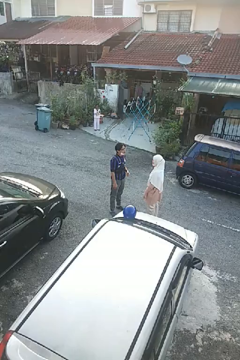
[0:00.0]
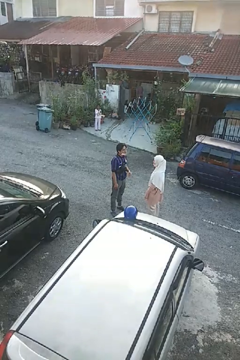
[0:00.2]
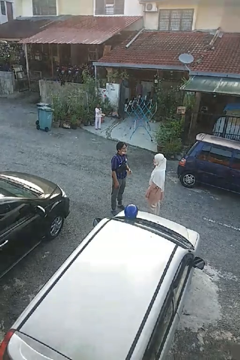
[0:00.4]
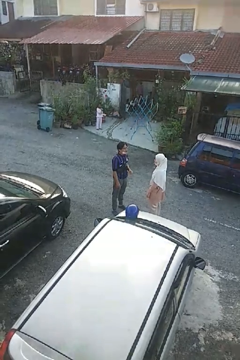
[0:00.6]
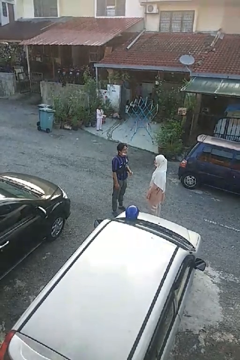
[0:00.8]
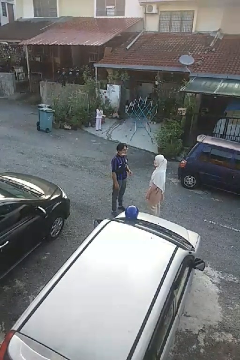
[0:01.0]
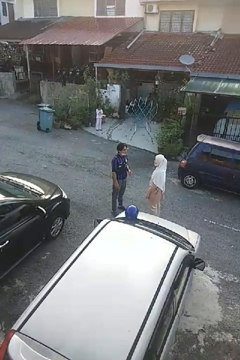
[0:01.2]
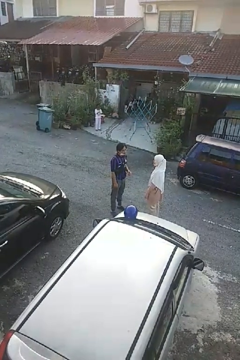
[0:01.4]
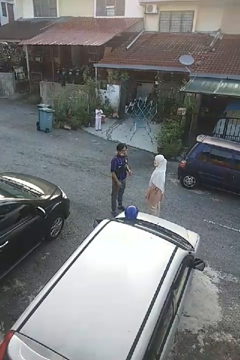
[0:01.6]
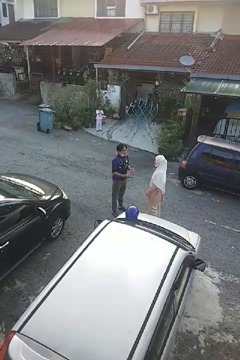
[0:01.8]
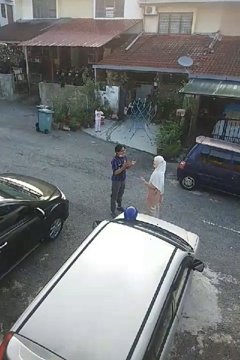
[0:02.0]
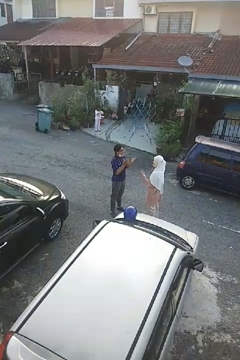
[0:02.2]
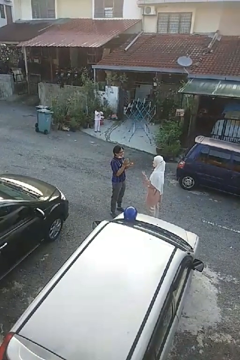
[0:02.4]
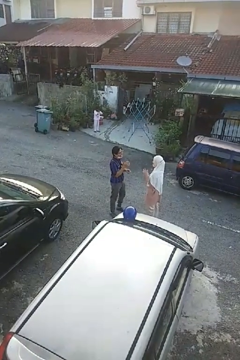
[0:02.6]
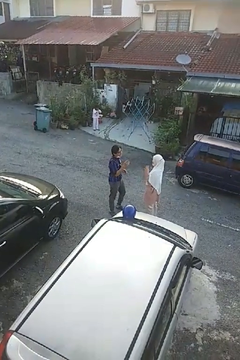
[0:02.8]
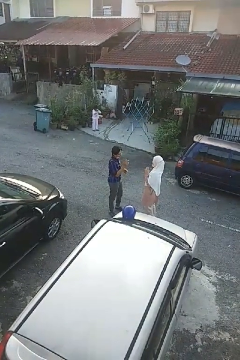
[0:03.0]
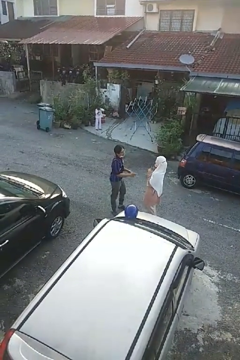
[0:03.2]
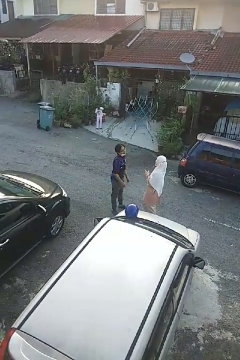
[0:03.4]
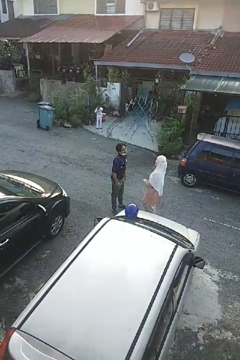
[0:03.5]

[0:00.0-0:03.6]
person laughs with person

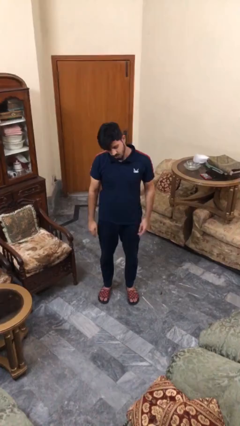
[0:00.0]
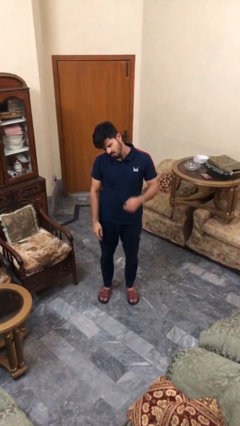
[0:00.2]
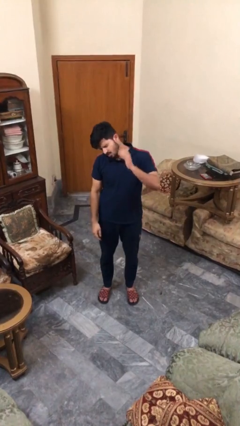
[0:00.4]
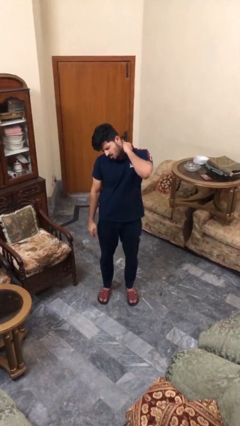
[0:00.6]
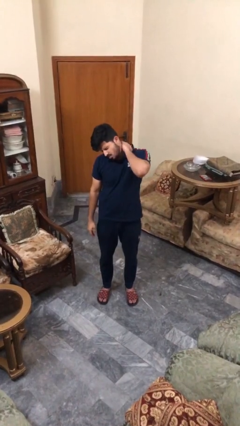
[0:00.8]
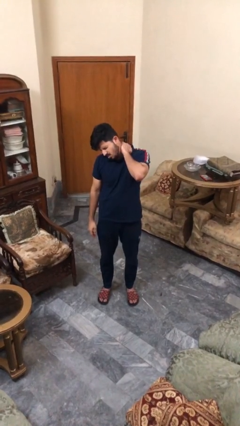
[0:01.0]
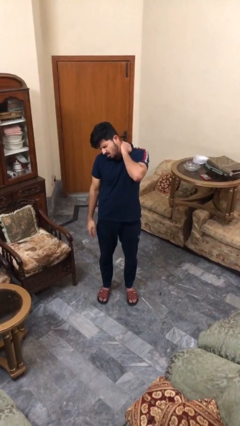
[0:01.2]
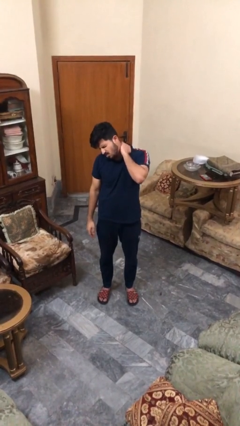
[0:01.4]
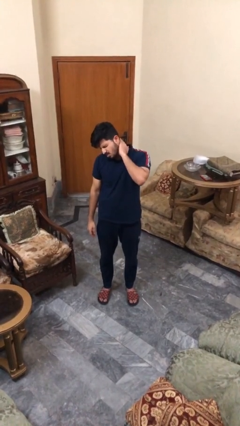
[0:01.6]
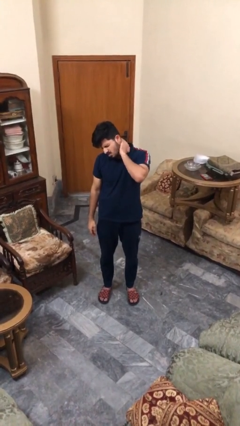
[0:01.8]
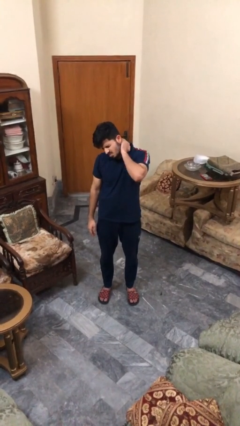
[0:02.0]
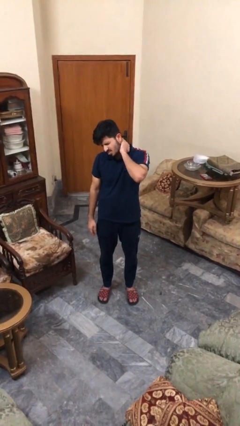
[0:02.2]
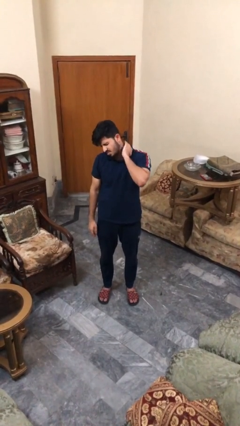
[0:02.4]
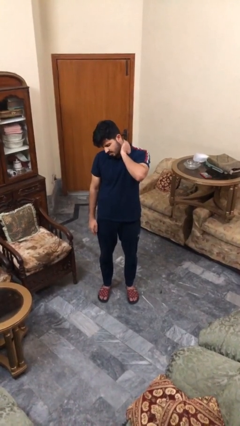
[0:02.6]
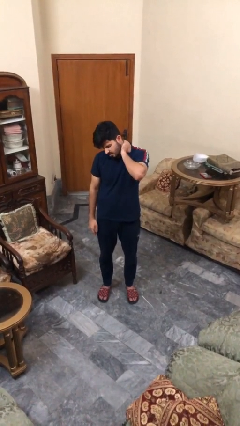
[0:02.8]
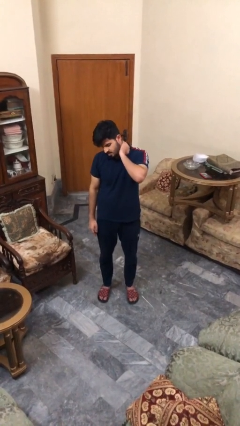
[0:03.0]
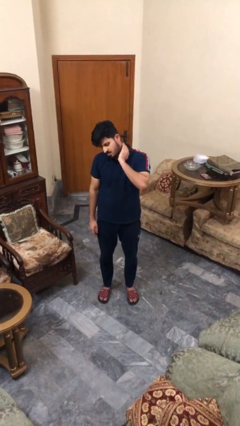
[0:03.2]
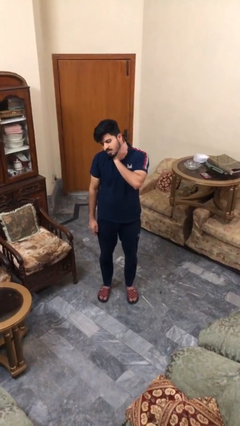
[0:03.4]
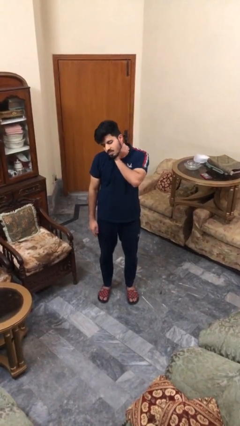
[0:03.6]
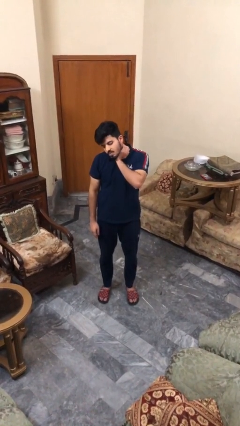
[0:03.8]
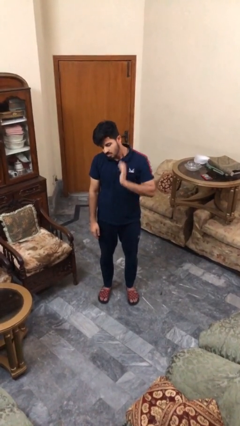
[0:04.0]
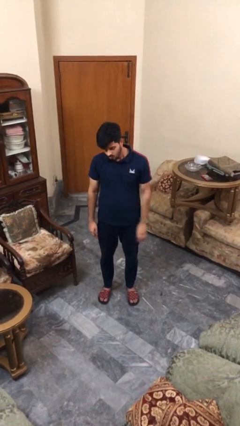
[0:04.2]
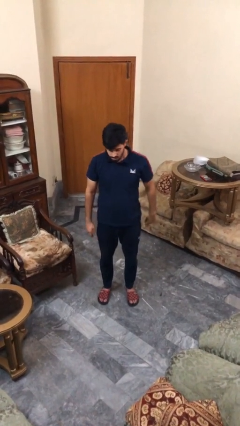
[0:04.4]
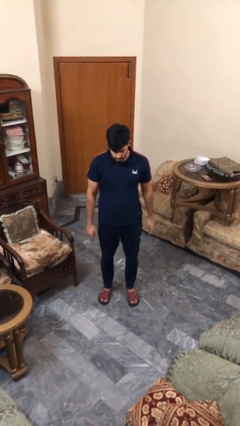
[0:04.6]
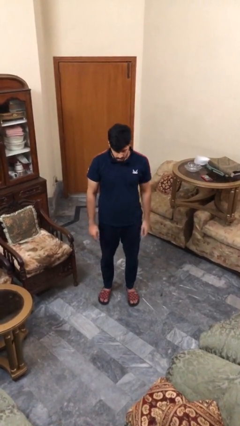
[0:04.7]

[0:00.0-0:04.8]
person rubs neck

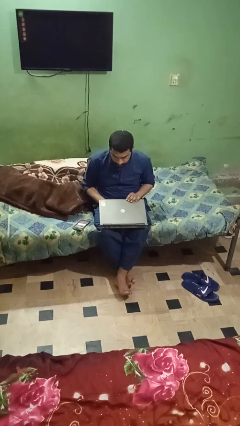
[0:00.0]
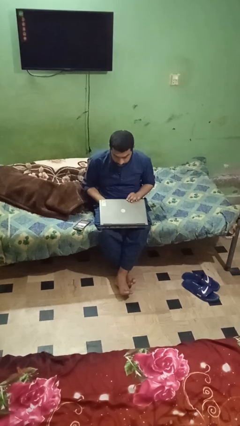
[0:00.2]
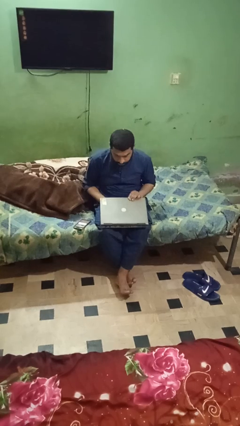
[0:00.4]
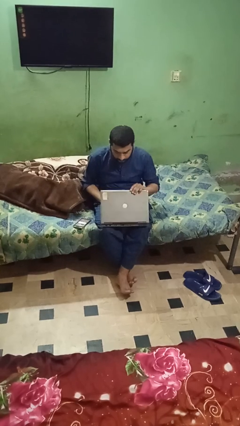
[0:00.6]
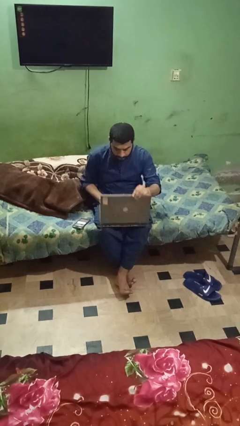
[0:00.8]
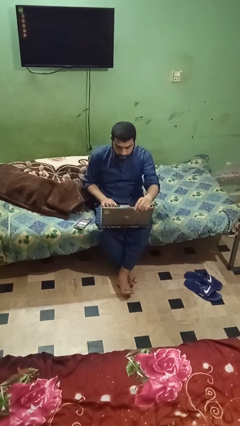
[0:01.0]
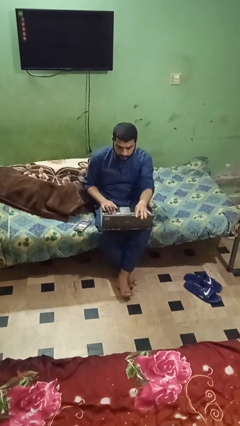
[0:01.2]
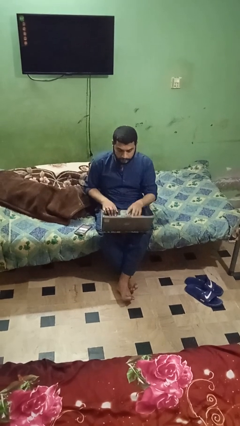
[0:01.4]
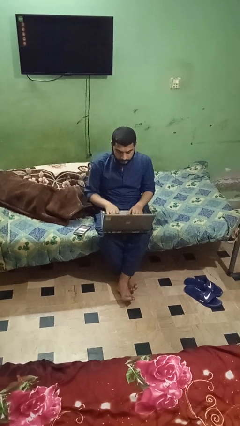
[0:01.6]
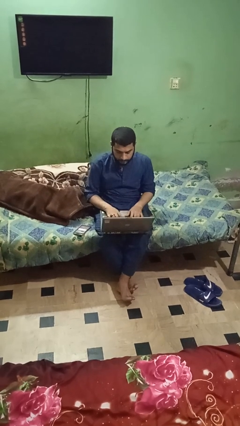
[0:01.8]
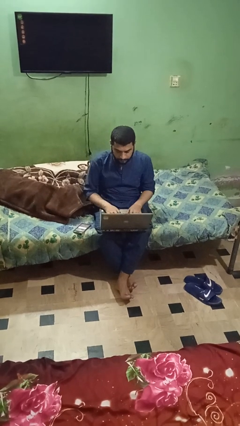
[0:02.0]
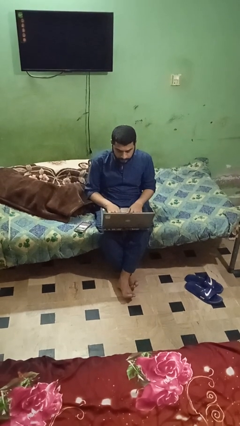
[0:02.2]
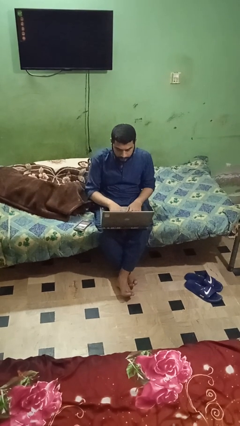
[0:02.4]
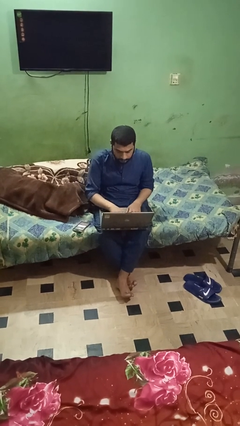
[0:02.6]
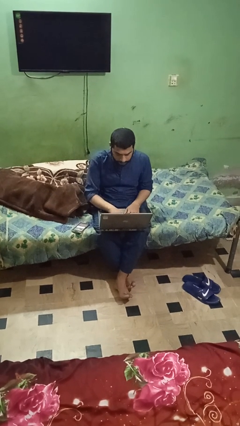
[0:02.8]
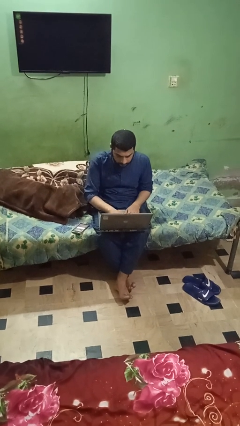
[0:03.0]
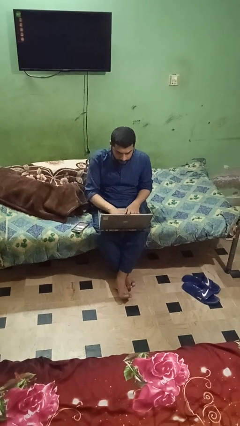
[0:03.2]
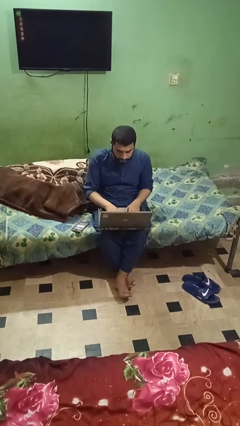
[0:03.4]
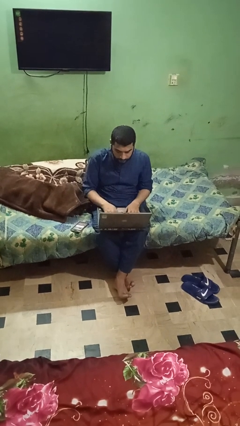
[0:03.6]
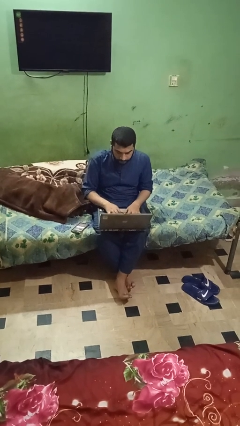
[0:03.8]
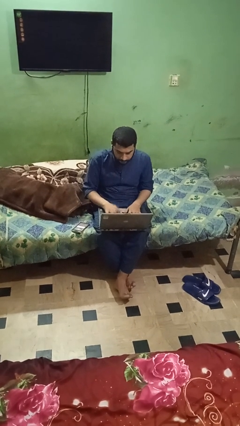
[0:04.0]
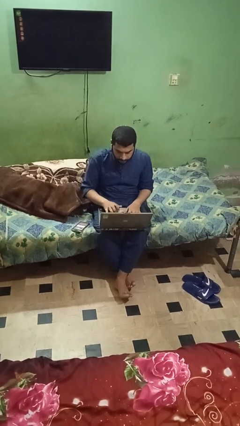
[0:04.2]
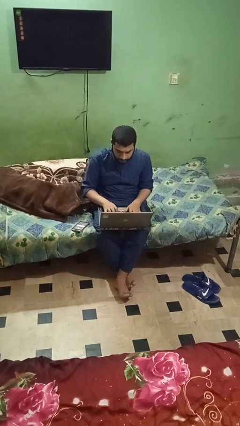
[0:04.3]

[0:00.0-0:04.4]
person opens laptop

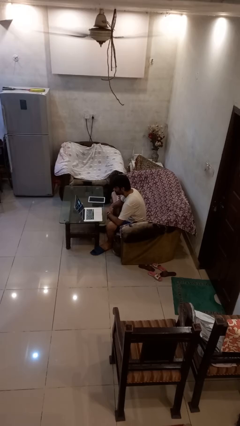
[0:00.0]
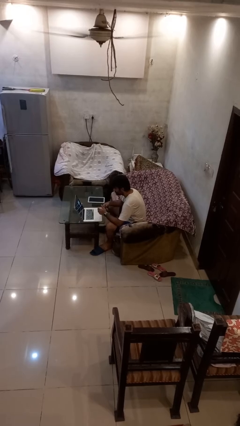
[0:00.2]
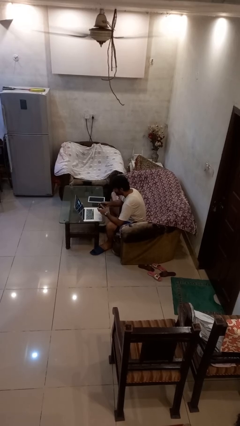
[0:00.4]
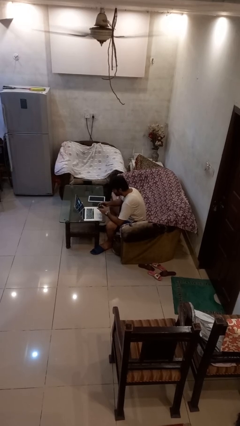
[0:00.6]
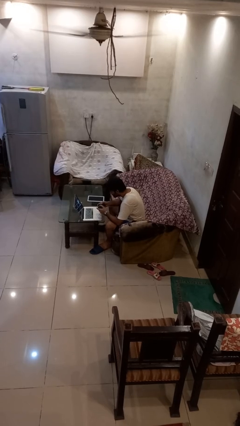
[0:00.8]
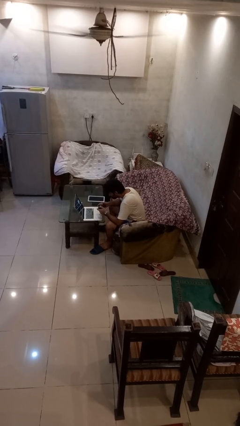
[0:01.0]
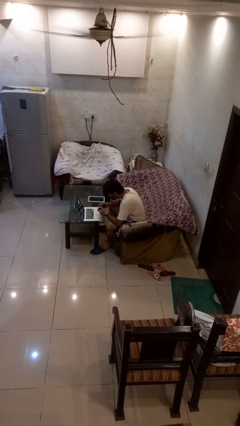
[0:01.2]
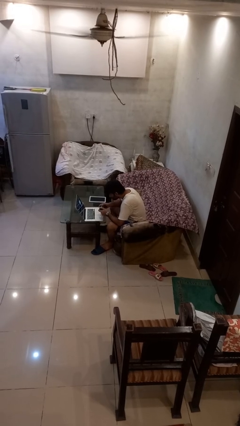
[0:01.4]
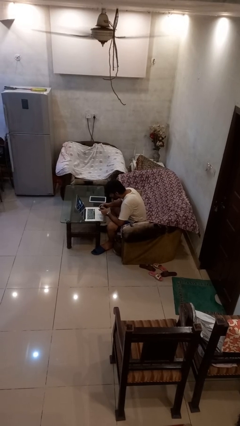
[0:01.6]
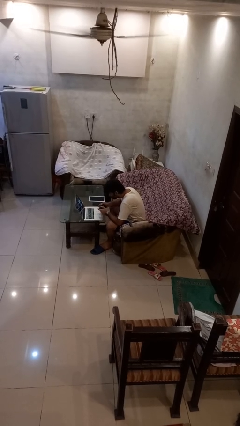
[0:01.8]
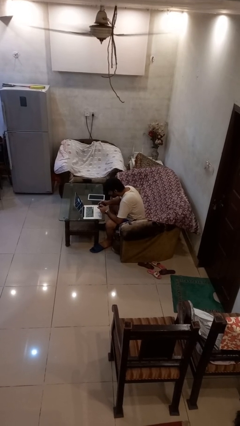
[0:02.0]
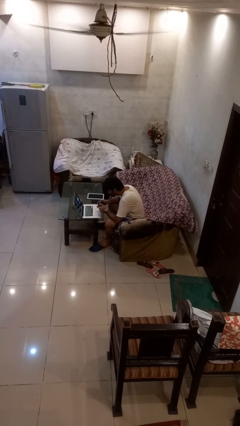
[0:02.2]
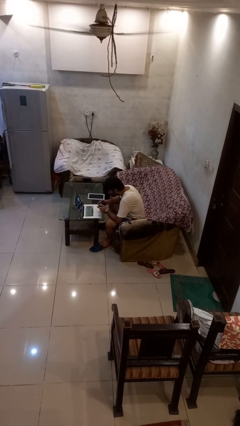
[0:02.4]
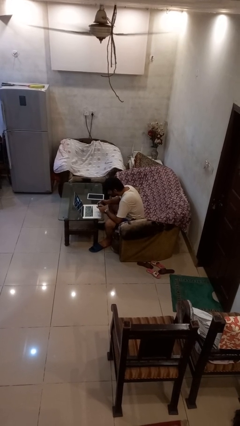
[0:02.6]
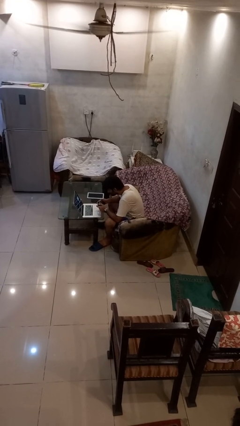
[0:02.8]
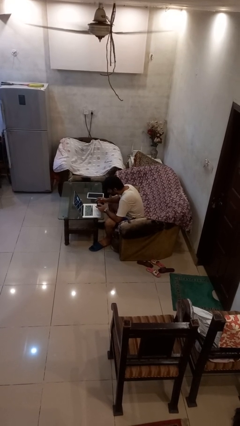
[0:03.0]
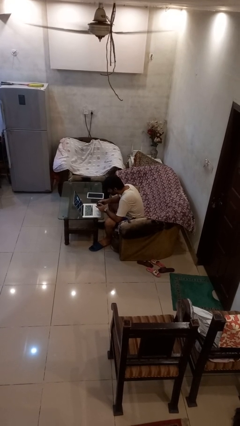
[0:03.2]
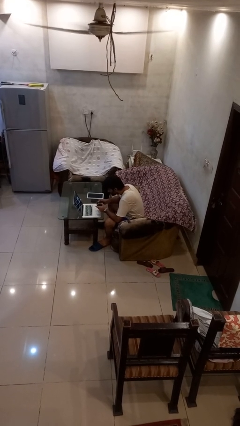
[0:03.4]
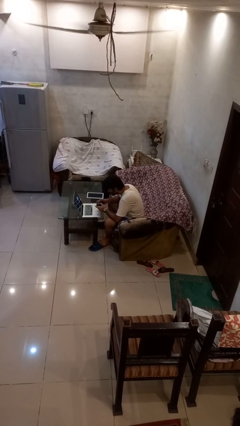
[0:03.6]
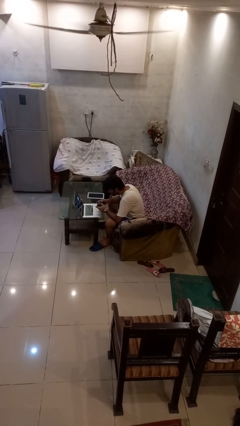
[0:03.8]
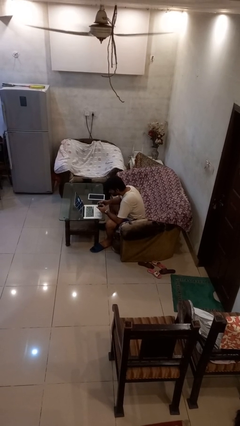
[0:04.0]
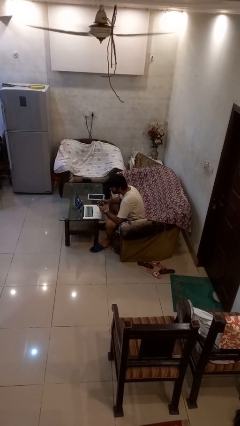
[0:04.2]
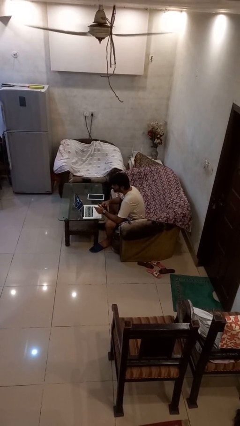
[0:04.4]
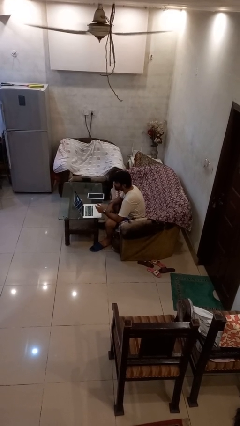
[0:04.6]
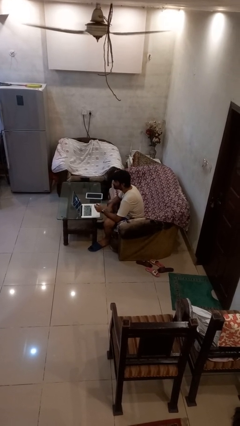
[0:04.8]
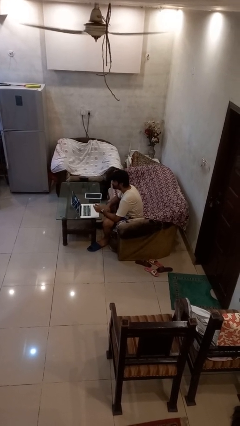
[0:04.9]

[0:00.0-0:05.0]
person interacts with handheld game

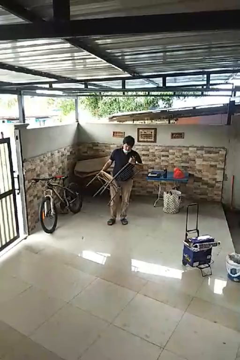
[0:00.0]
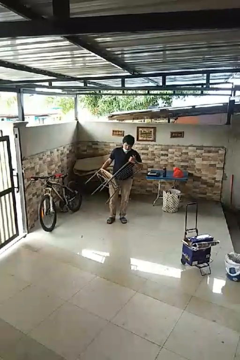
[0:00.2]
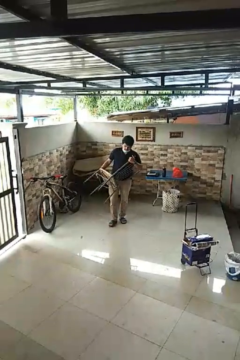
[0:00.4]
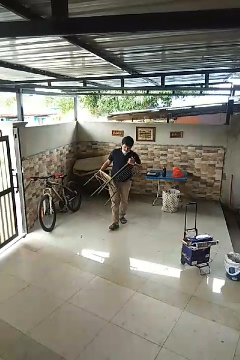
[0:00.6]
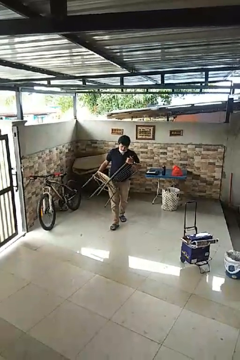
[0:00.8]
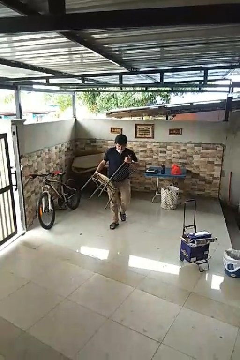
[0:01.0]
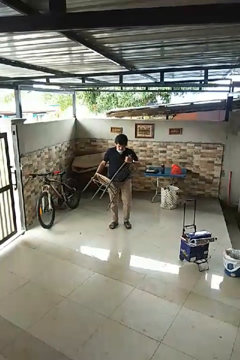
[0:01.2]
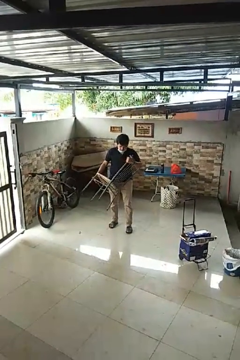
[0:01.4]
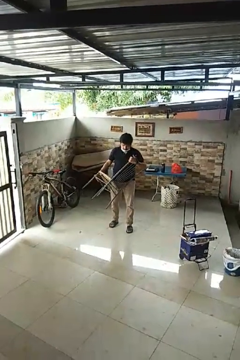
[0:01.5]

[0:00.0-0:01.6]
person carries furniture
